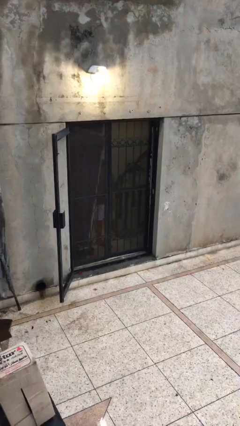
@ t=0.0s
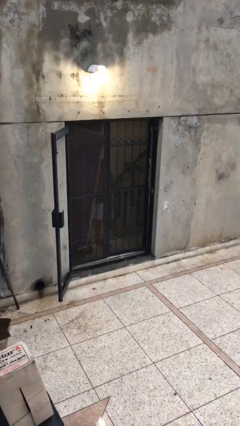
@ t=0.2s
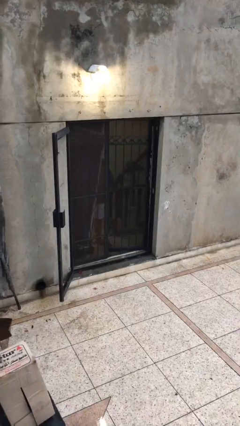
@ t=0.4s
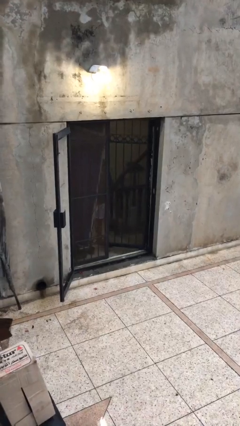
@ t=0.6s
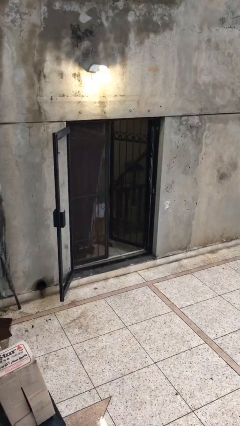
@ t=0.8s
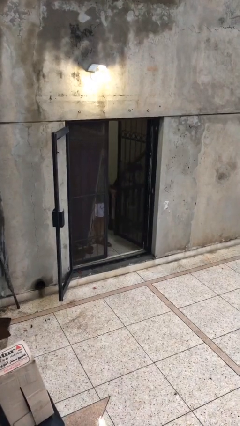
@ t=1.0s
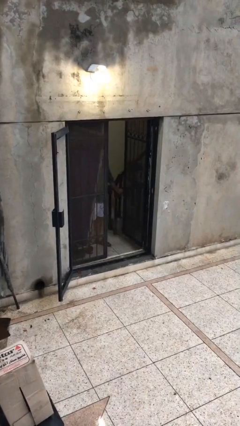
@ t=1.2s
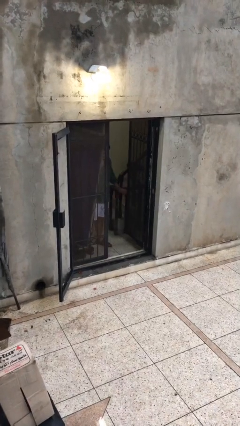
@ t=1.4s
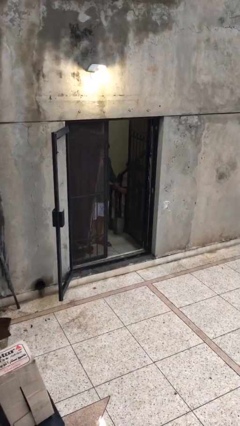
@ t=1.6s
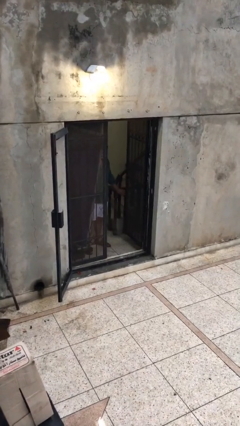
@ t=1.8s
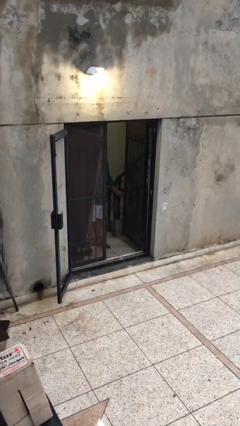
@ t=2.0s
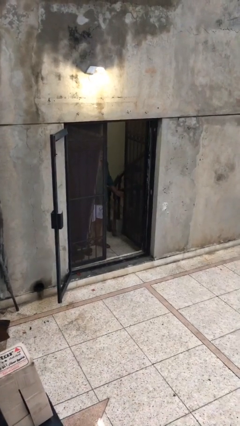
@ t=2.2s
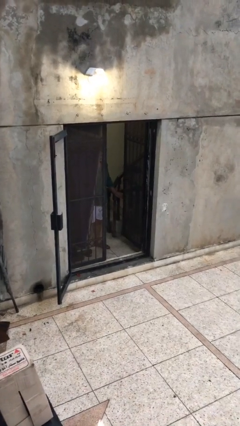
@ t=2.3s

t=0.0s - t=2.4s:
person opens facility door

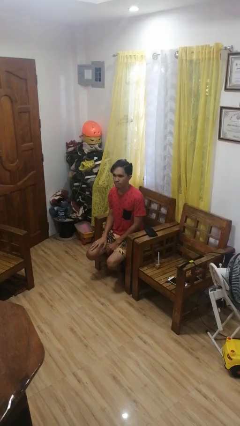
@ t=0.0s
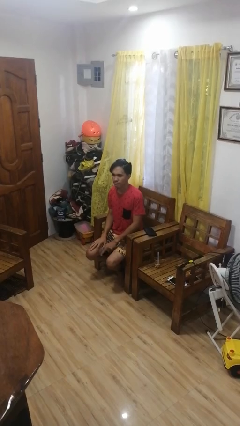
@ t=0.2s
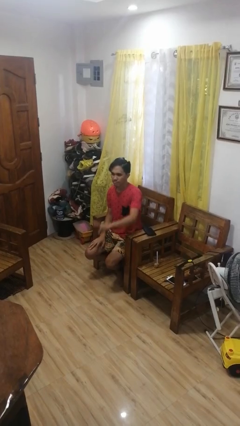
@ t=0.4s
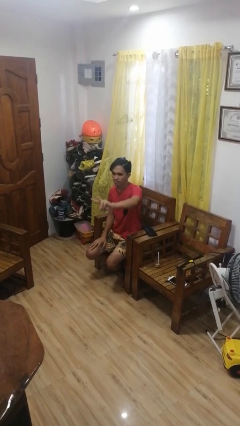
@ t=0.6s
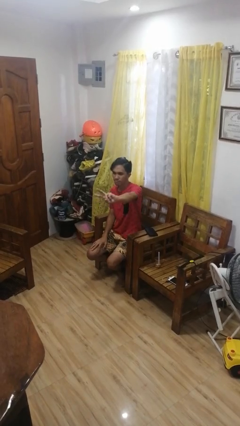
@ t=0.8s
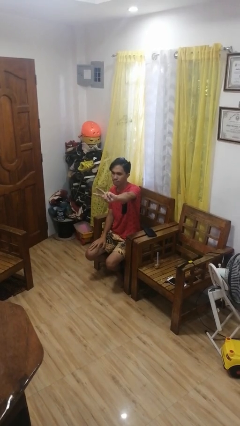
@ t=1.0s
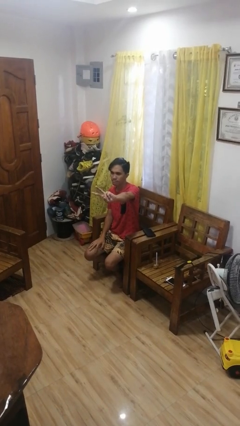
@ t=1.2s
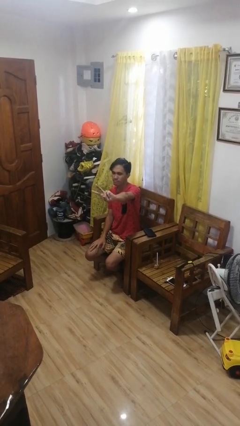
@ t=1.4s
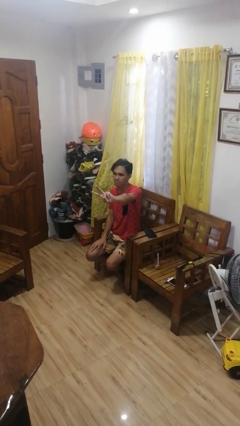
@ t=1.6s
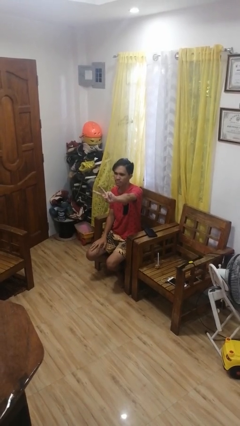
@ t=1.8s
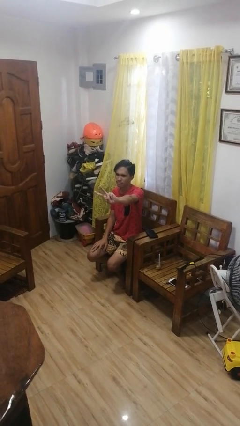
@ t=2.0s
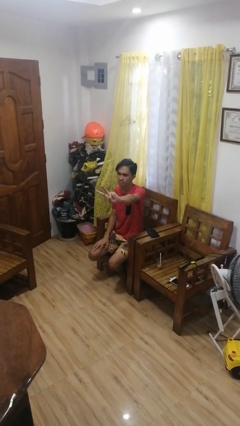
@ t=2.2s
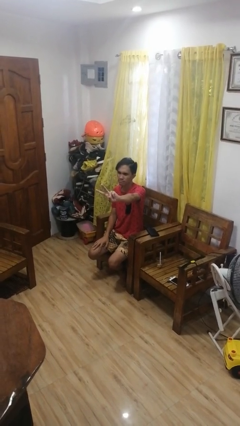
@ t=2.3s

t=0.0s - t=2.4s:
person gestures peace

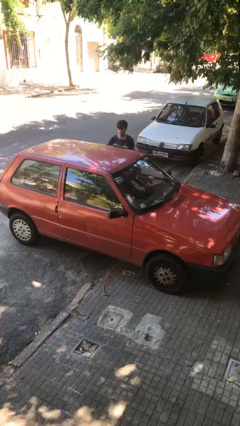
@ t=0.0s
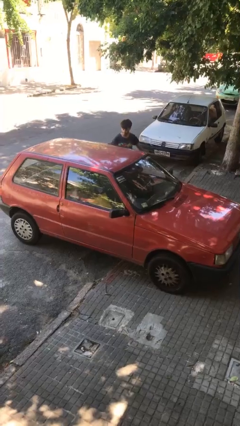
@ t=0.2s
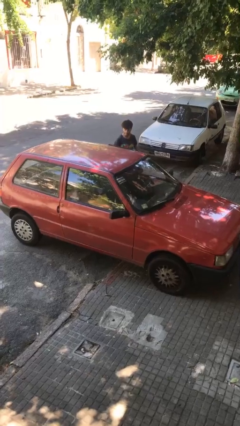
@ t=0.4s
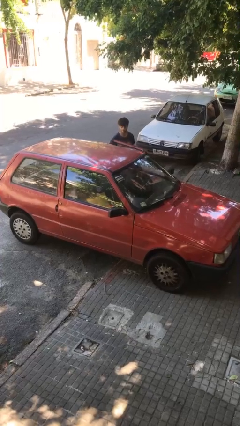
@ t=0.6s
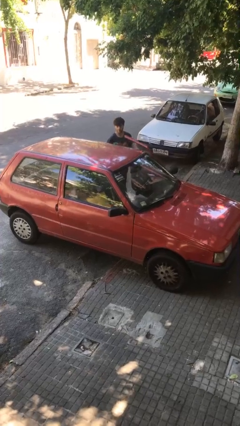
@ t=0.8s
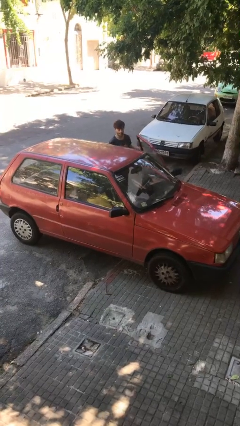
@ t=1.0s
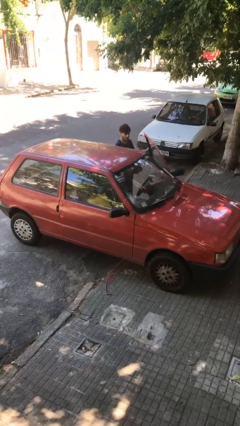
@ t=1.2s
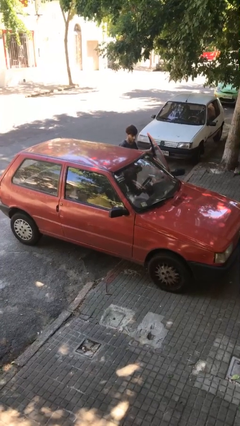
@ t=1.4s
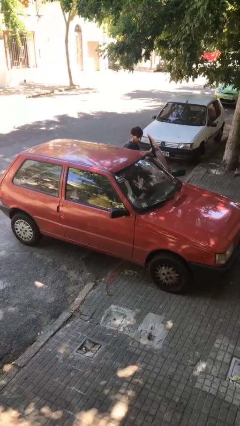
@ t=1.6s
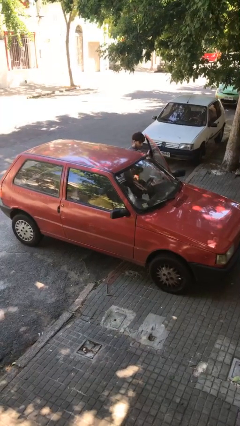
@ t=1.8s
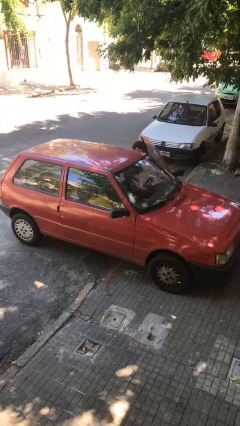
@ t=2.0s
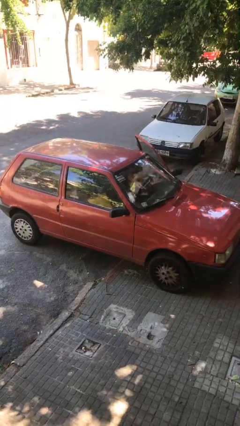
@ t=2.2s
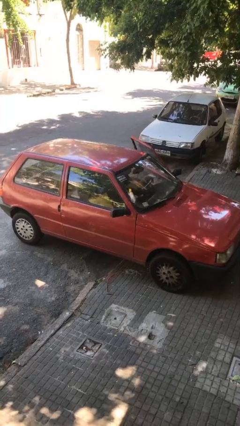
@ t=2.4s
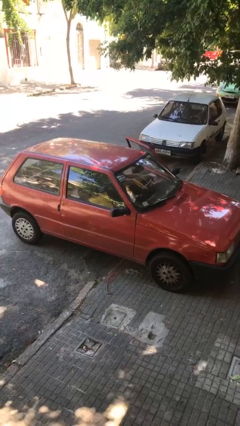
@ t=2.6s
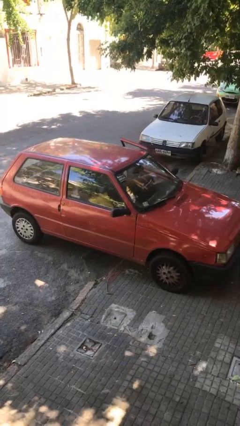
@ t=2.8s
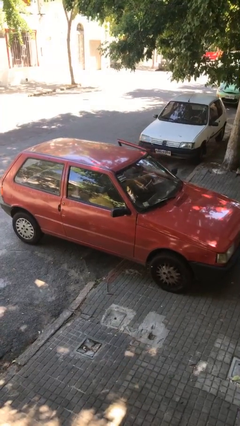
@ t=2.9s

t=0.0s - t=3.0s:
car picks up person

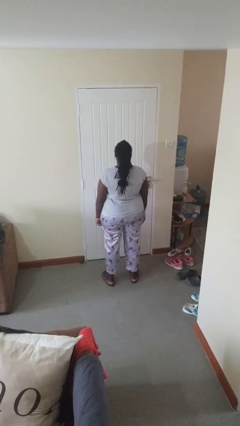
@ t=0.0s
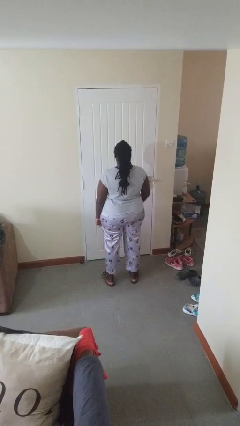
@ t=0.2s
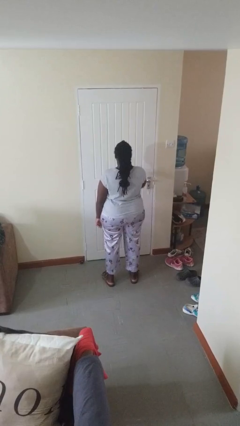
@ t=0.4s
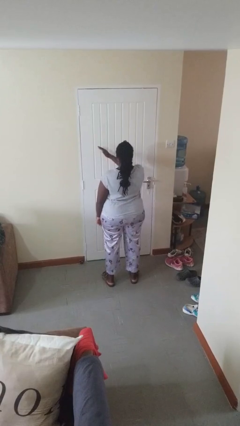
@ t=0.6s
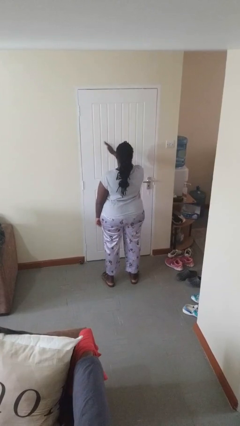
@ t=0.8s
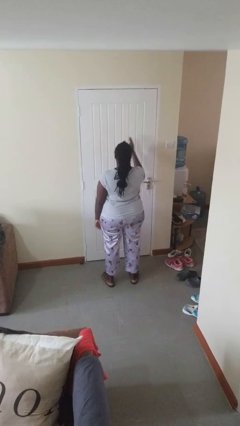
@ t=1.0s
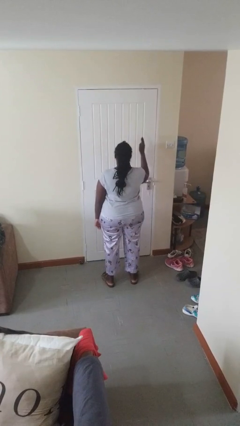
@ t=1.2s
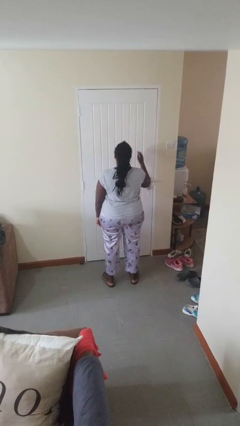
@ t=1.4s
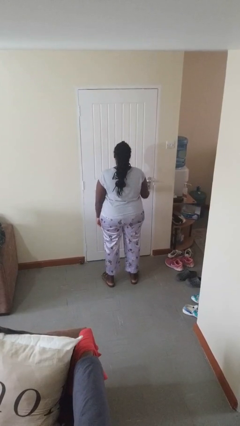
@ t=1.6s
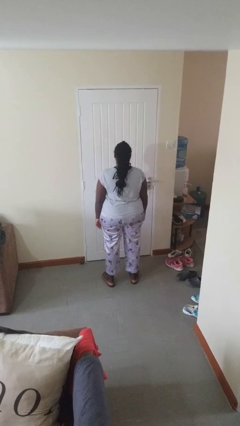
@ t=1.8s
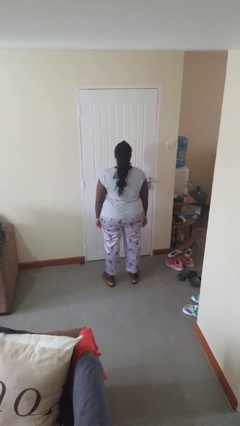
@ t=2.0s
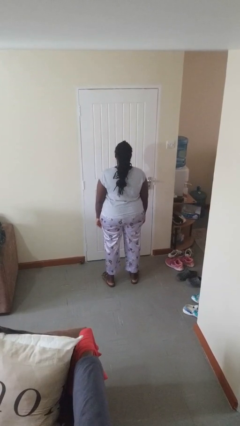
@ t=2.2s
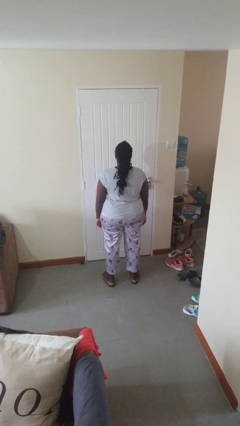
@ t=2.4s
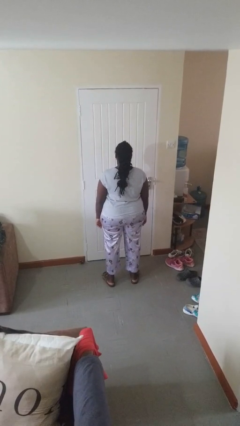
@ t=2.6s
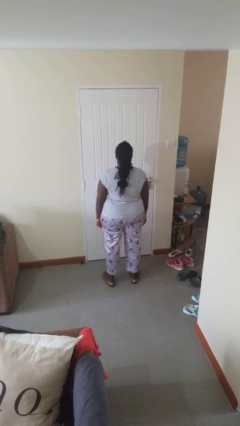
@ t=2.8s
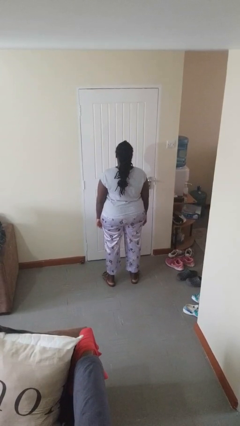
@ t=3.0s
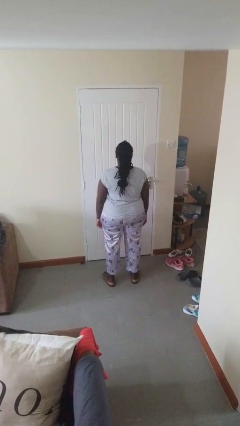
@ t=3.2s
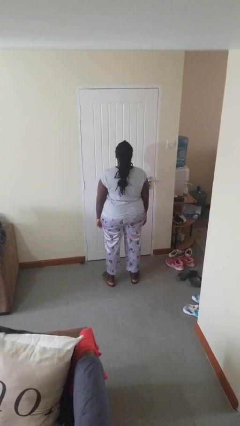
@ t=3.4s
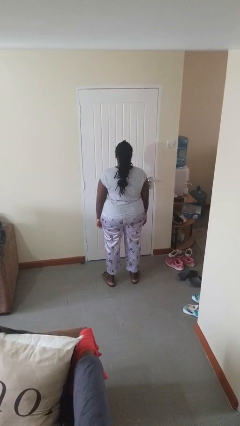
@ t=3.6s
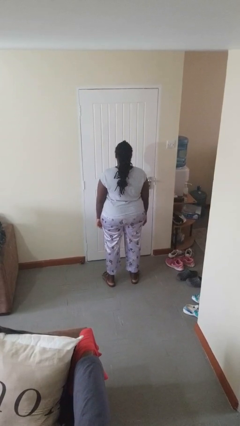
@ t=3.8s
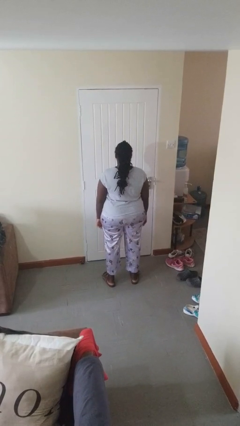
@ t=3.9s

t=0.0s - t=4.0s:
person gestures swipe right

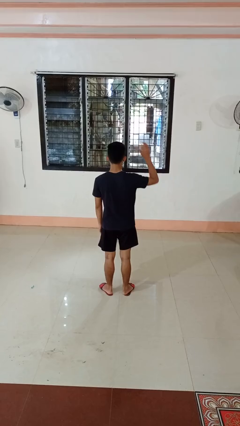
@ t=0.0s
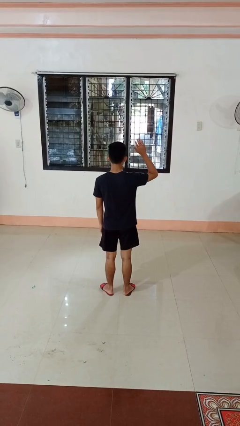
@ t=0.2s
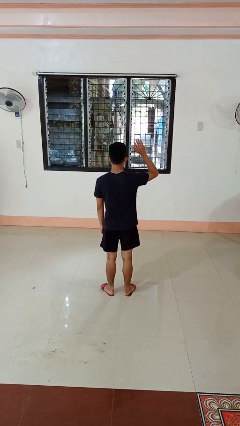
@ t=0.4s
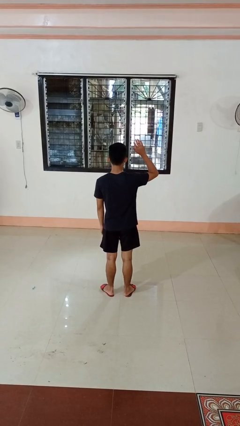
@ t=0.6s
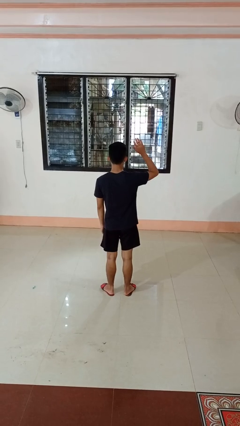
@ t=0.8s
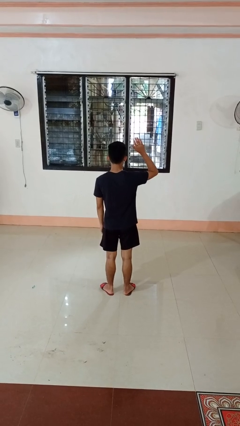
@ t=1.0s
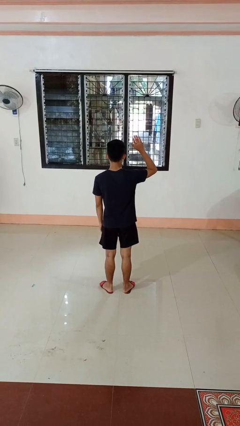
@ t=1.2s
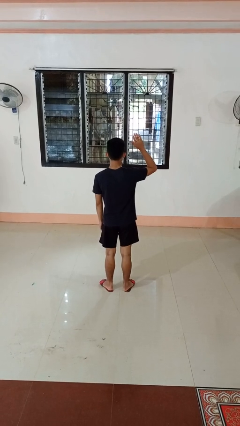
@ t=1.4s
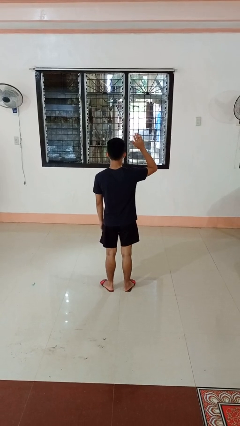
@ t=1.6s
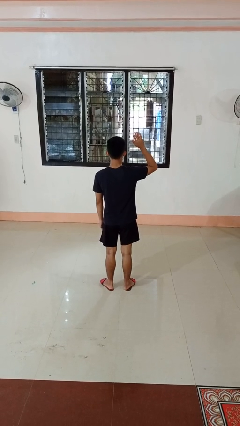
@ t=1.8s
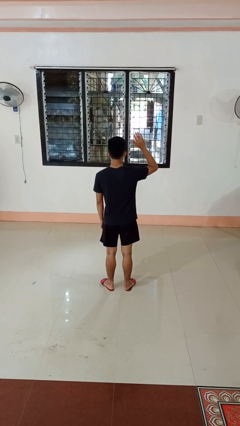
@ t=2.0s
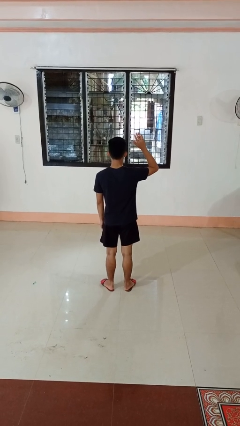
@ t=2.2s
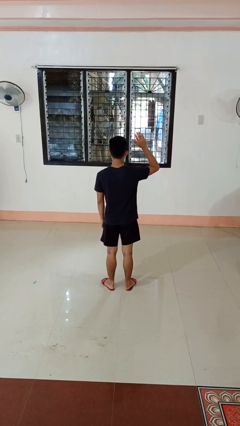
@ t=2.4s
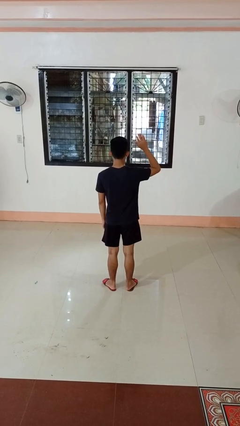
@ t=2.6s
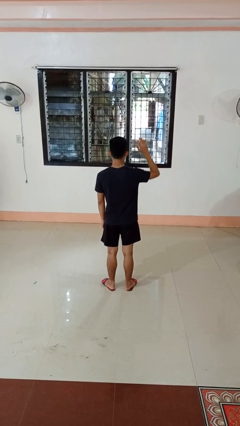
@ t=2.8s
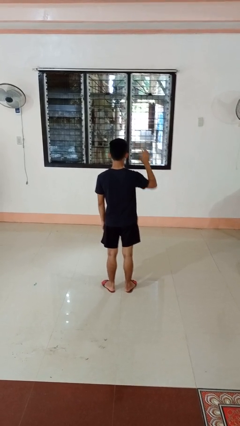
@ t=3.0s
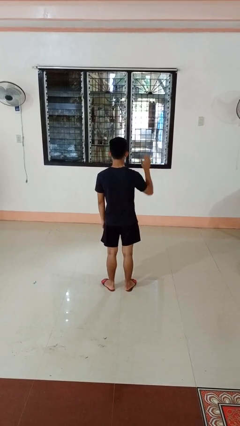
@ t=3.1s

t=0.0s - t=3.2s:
person gestures raise hand

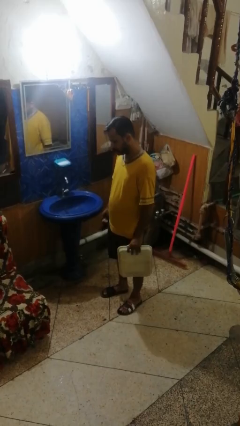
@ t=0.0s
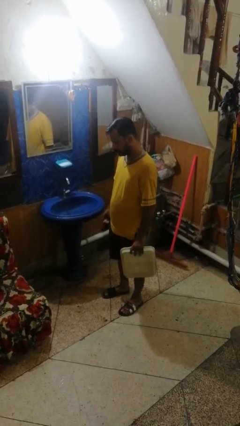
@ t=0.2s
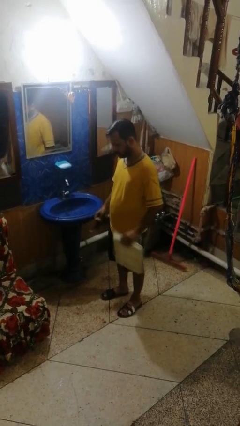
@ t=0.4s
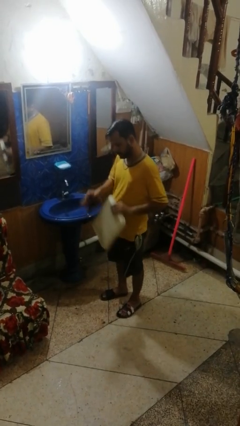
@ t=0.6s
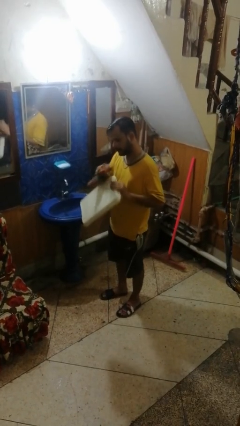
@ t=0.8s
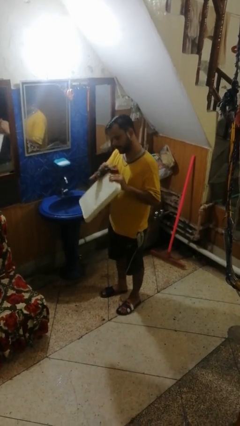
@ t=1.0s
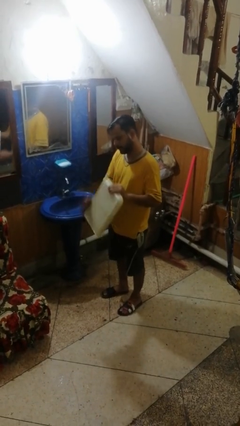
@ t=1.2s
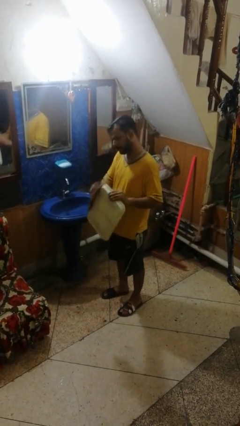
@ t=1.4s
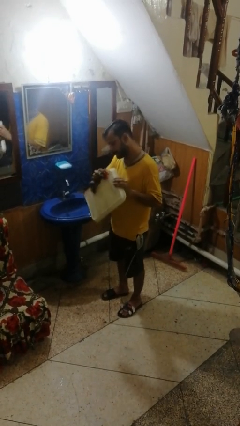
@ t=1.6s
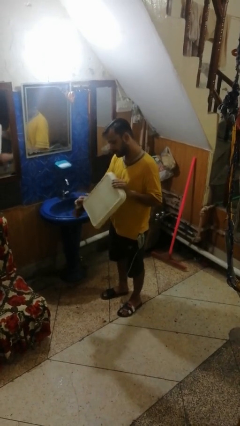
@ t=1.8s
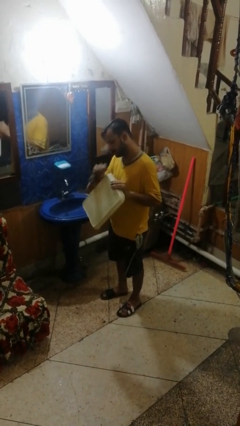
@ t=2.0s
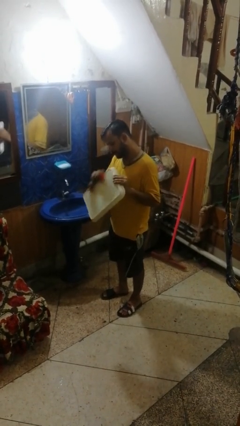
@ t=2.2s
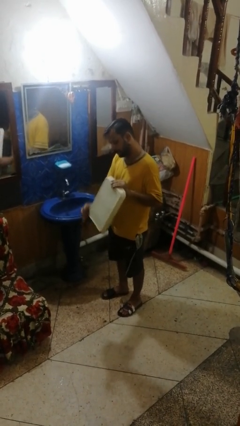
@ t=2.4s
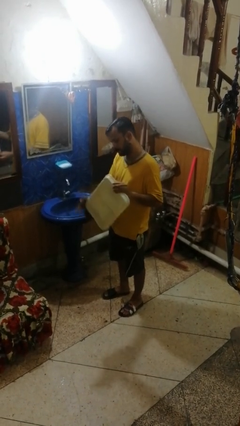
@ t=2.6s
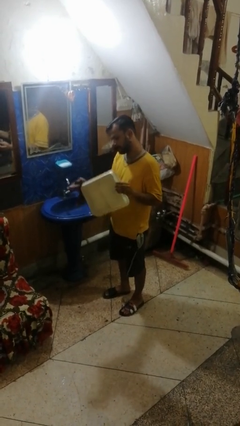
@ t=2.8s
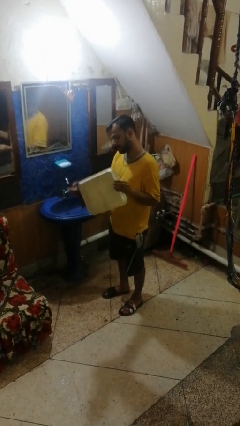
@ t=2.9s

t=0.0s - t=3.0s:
person dries dish
